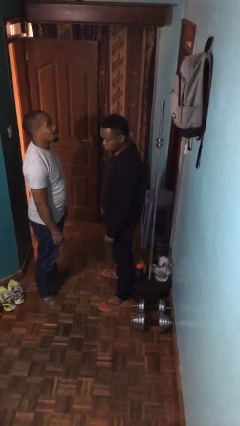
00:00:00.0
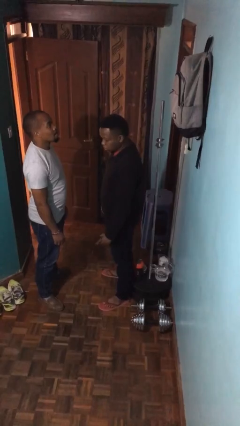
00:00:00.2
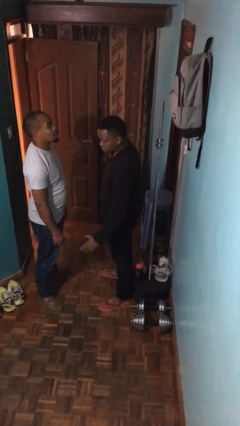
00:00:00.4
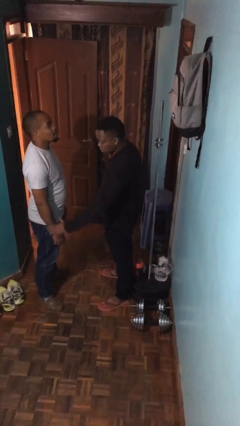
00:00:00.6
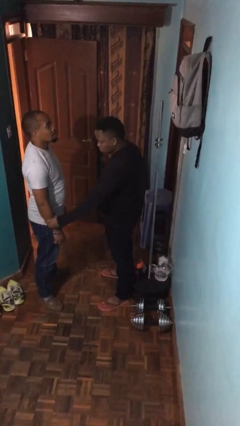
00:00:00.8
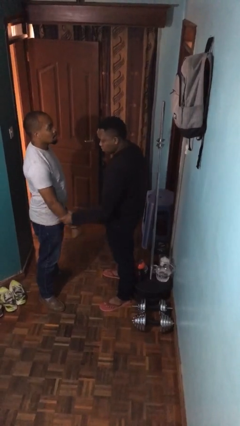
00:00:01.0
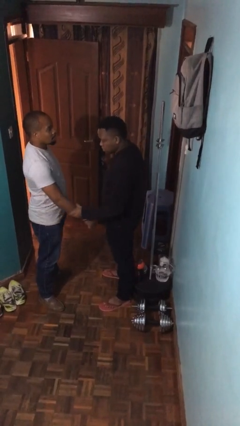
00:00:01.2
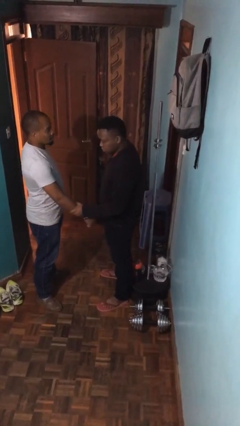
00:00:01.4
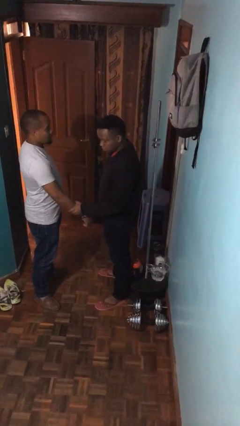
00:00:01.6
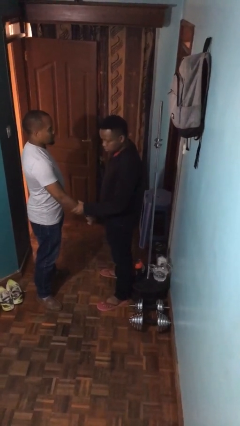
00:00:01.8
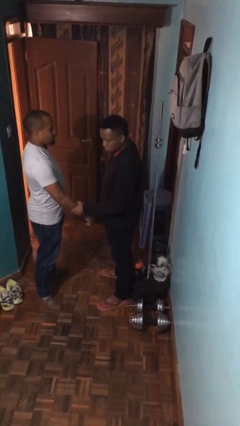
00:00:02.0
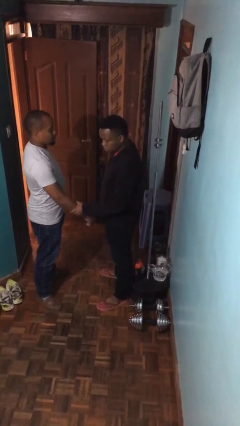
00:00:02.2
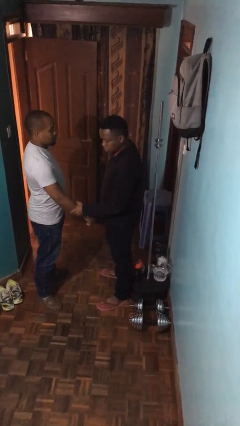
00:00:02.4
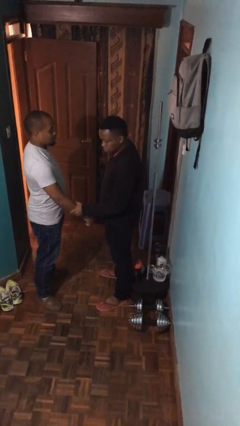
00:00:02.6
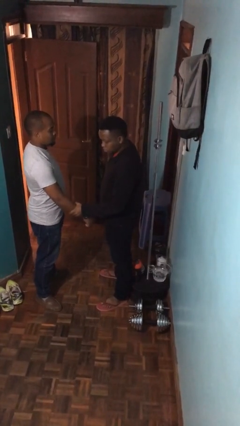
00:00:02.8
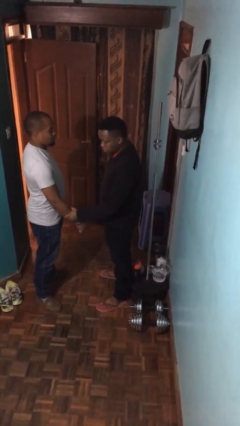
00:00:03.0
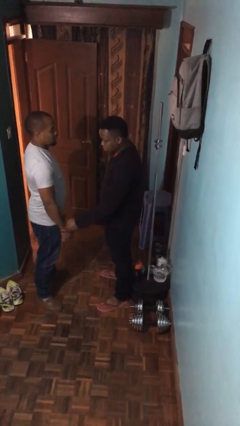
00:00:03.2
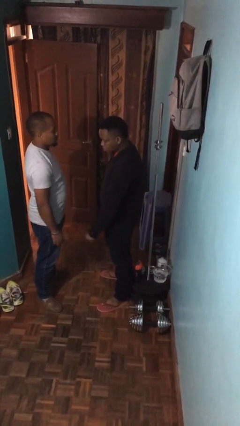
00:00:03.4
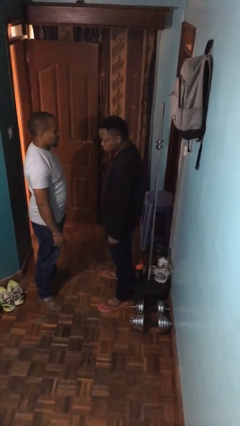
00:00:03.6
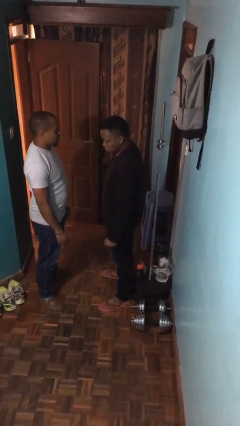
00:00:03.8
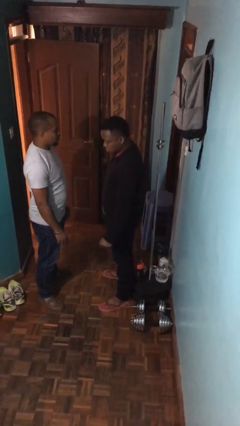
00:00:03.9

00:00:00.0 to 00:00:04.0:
person grabs person by forearm

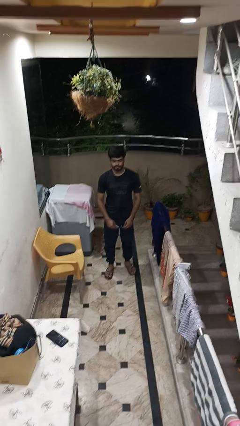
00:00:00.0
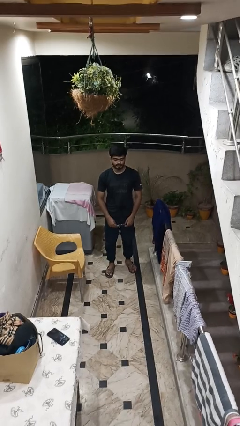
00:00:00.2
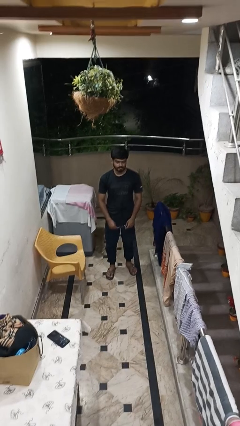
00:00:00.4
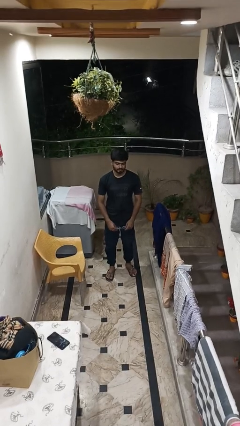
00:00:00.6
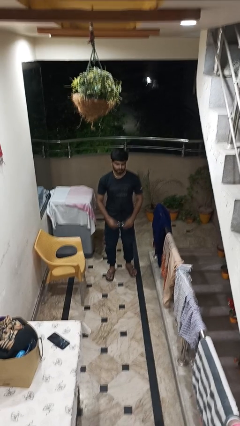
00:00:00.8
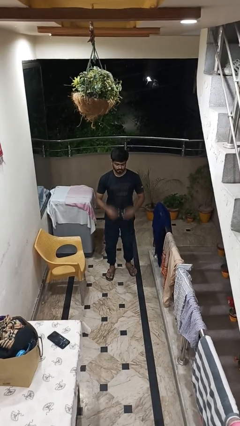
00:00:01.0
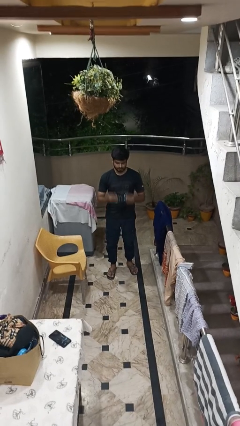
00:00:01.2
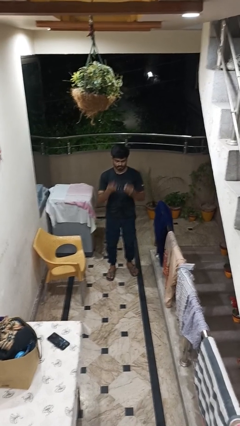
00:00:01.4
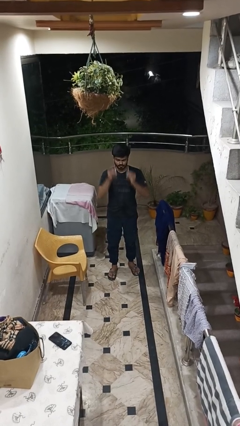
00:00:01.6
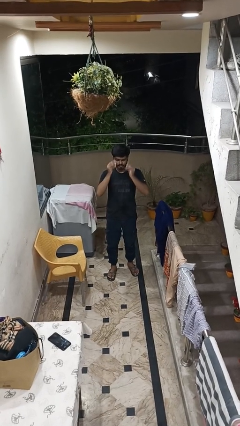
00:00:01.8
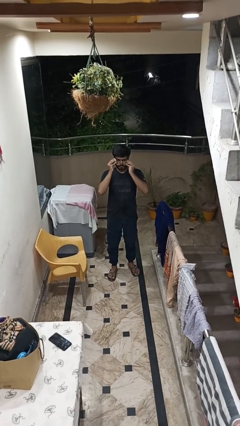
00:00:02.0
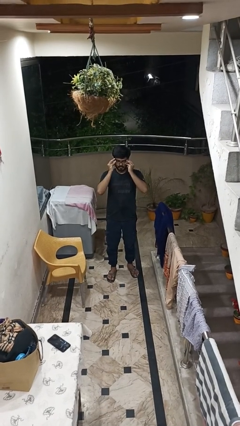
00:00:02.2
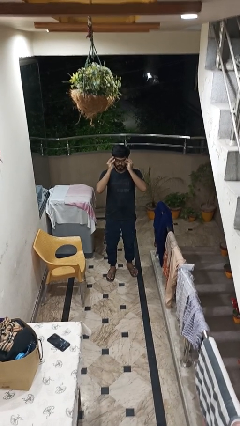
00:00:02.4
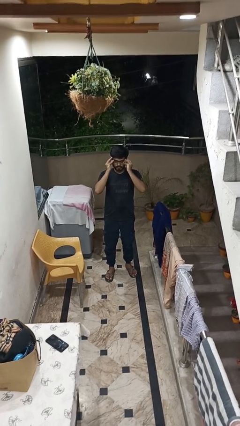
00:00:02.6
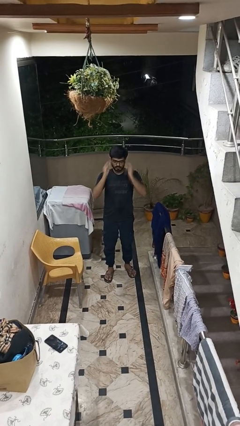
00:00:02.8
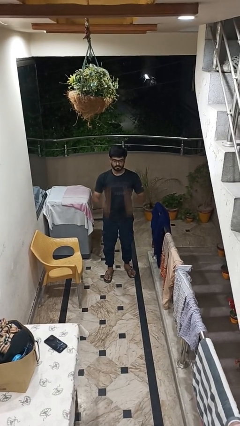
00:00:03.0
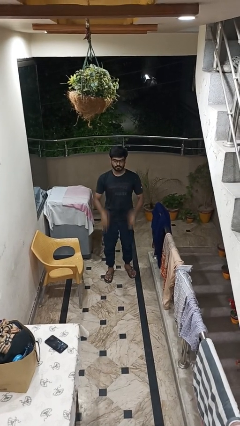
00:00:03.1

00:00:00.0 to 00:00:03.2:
person puts on glasses

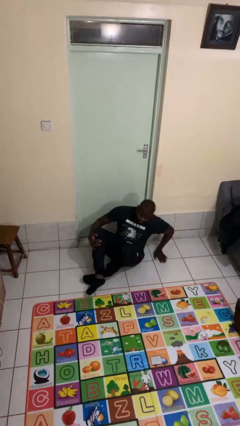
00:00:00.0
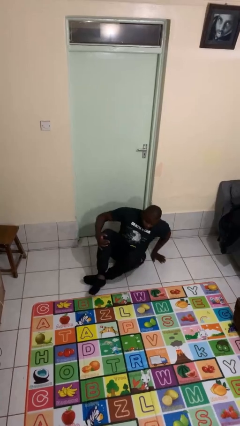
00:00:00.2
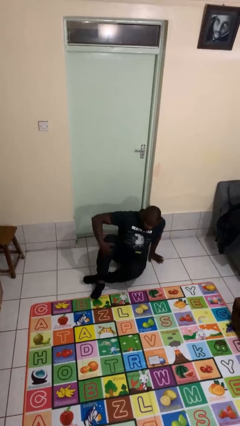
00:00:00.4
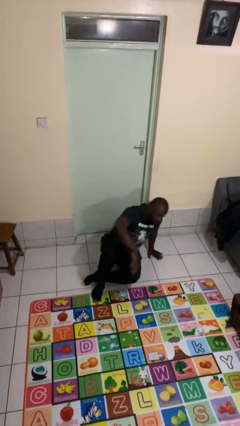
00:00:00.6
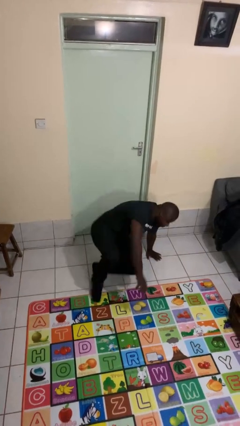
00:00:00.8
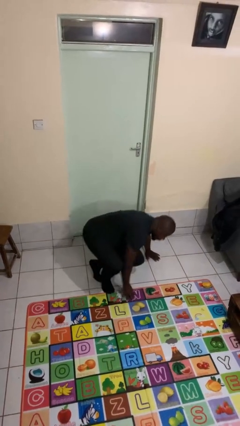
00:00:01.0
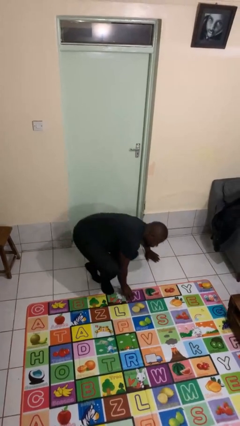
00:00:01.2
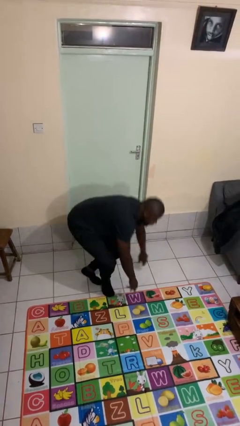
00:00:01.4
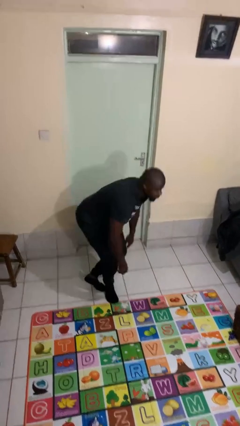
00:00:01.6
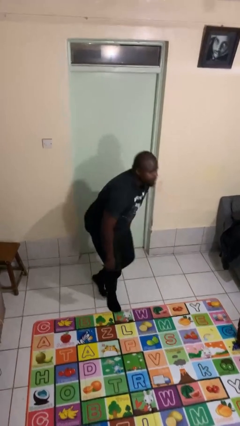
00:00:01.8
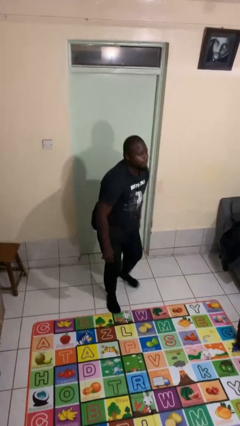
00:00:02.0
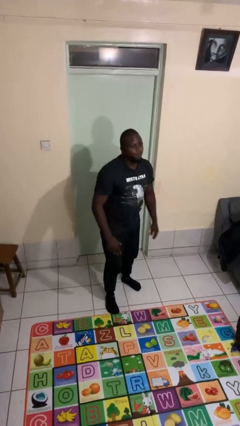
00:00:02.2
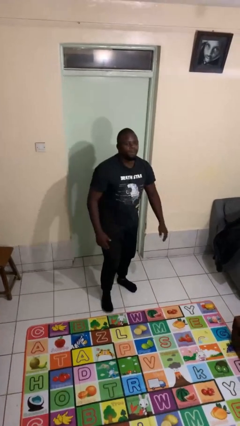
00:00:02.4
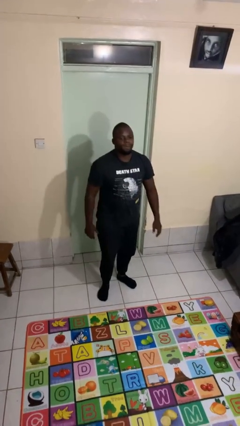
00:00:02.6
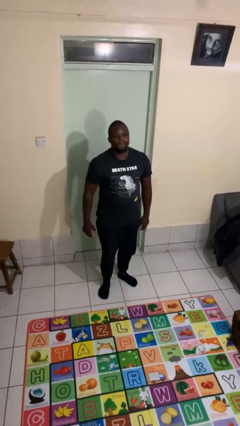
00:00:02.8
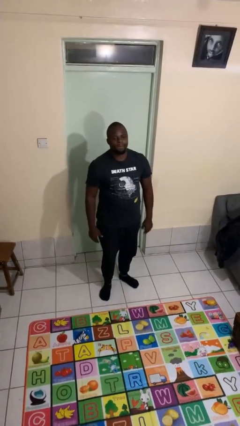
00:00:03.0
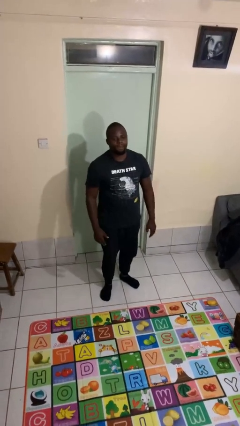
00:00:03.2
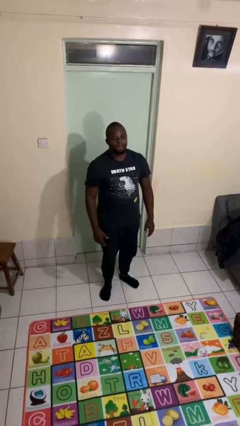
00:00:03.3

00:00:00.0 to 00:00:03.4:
person stands up from floor

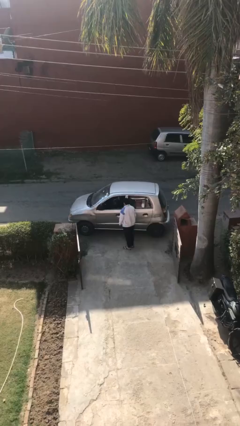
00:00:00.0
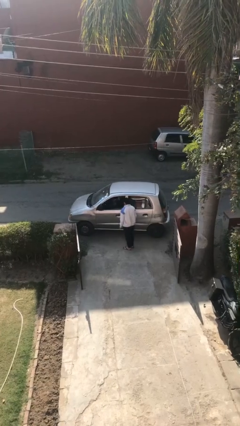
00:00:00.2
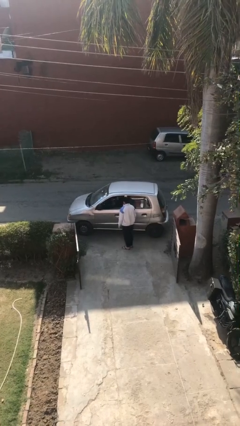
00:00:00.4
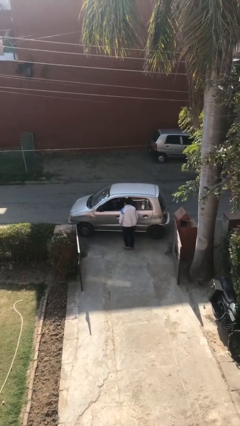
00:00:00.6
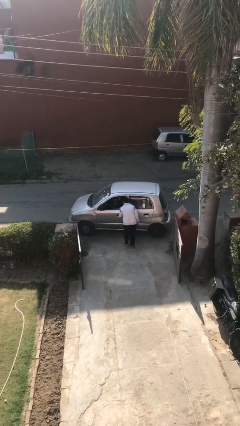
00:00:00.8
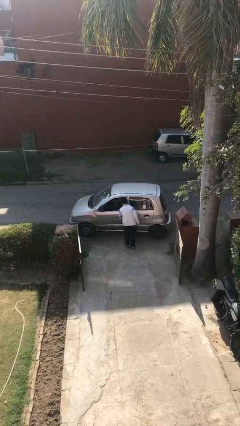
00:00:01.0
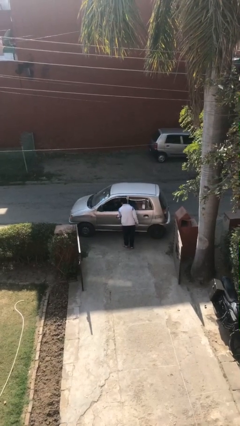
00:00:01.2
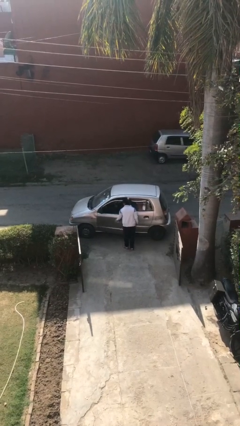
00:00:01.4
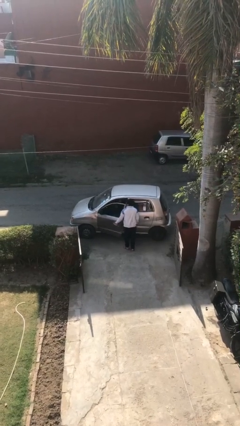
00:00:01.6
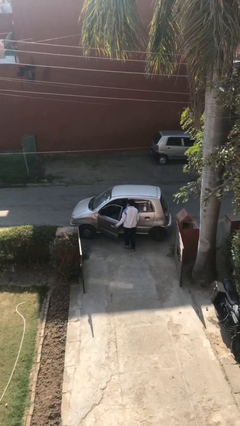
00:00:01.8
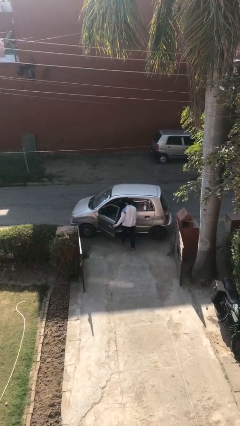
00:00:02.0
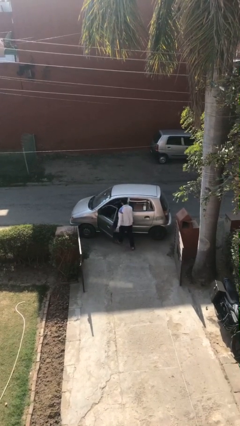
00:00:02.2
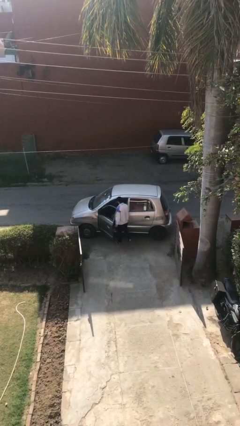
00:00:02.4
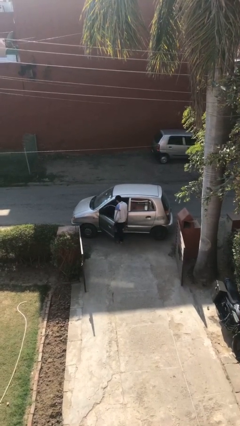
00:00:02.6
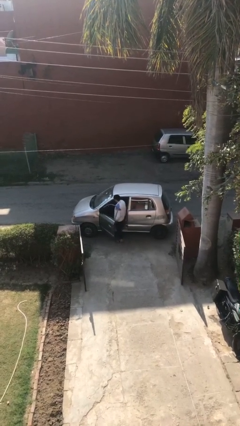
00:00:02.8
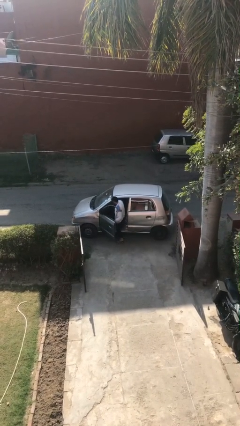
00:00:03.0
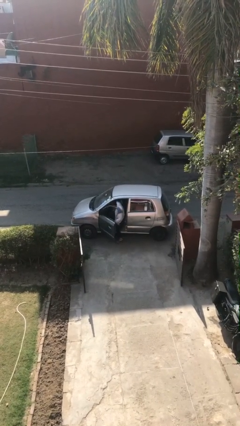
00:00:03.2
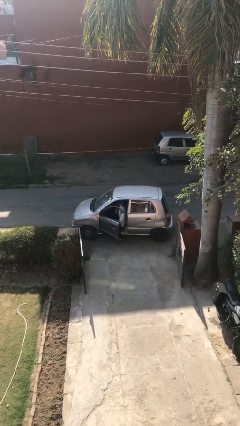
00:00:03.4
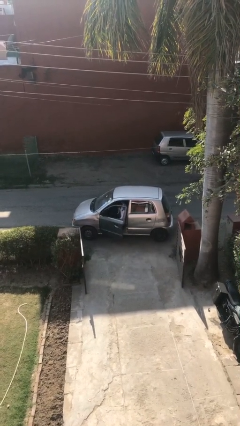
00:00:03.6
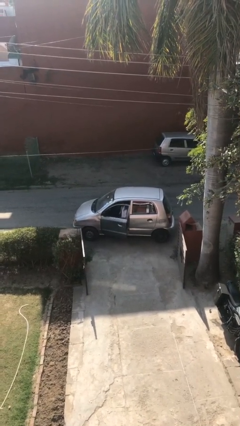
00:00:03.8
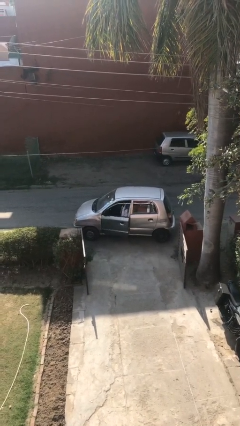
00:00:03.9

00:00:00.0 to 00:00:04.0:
car picks up person

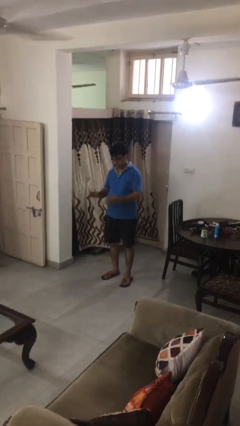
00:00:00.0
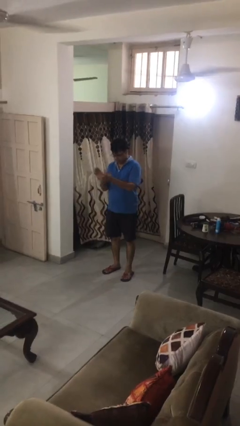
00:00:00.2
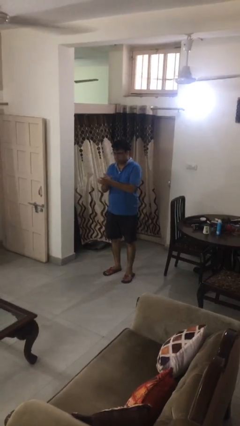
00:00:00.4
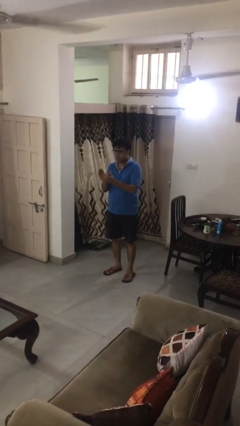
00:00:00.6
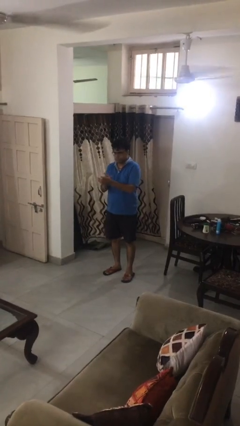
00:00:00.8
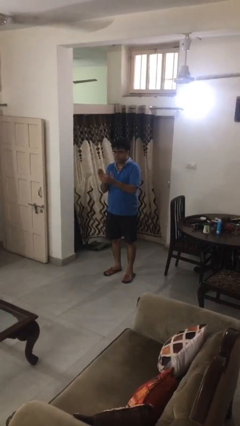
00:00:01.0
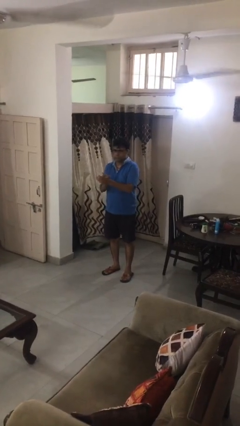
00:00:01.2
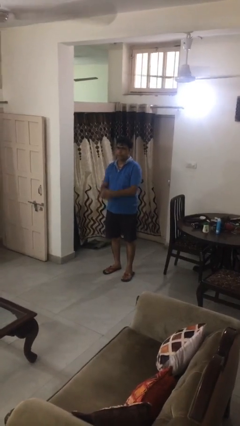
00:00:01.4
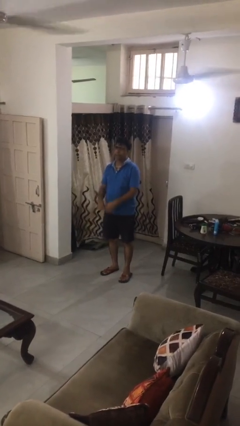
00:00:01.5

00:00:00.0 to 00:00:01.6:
person claps hands

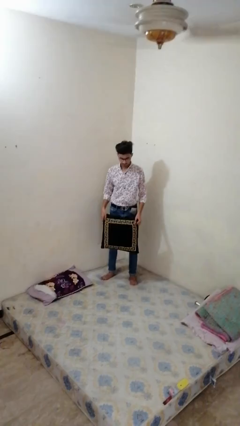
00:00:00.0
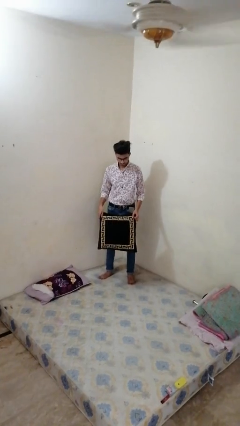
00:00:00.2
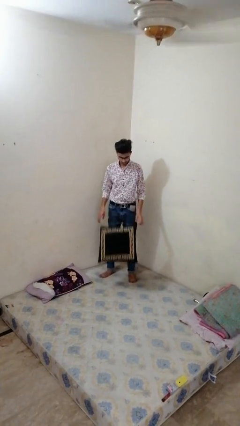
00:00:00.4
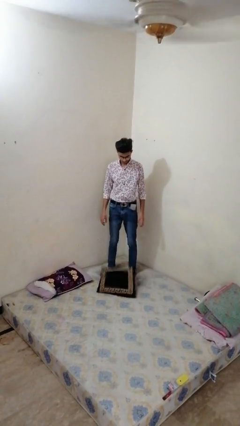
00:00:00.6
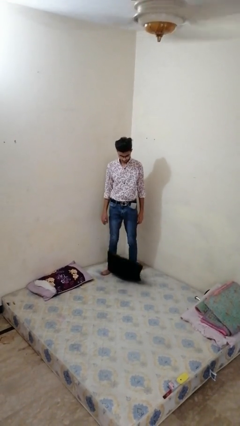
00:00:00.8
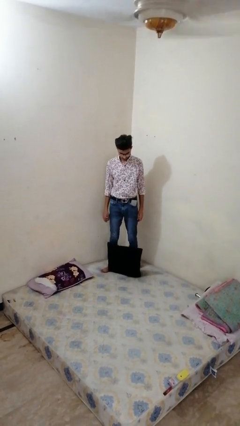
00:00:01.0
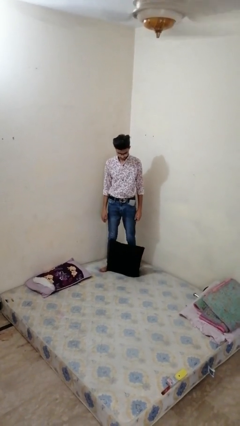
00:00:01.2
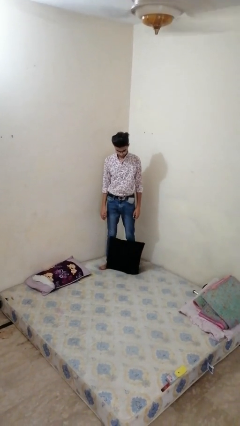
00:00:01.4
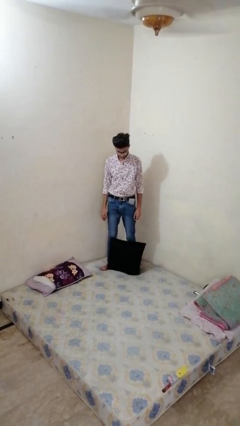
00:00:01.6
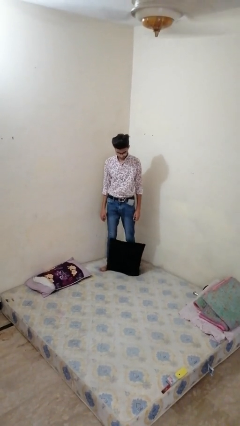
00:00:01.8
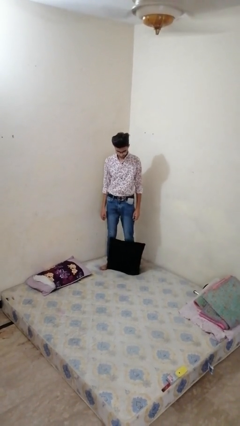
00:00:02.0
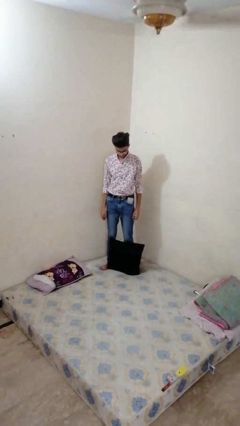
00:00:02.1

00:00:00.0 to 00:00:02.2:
person throws object on bed
